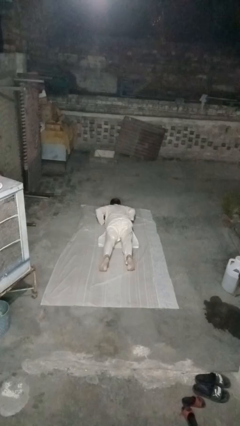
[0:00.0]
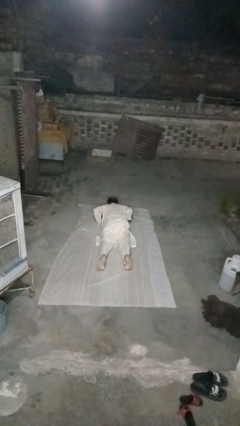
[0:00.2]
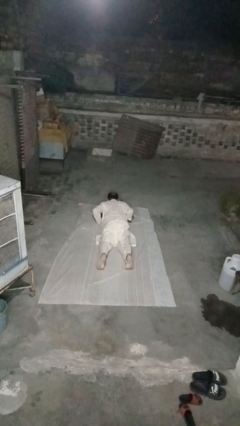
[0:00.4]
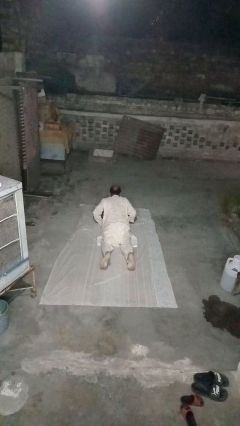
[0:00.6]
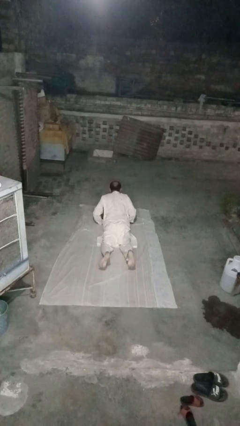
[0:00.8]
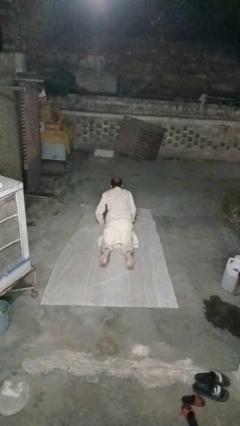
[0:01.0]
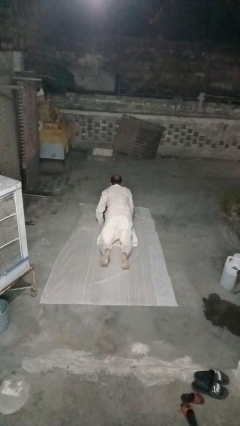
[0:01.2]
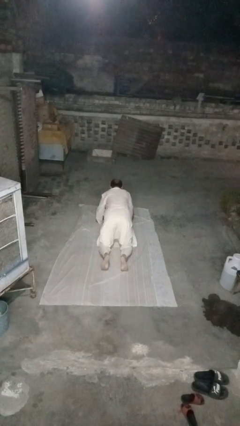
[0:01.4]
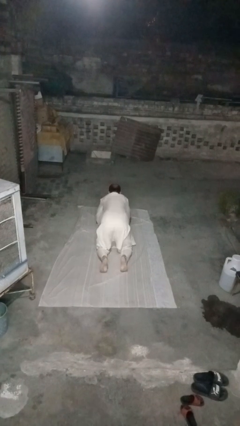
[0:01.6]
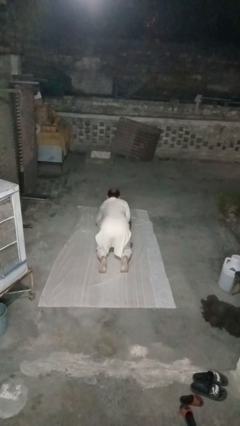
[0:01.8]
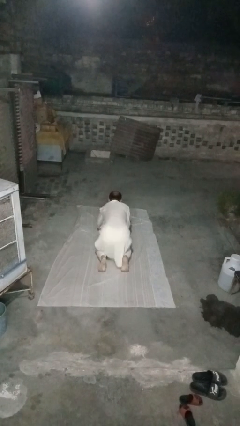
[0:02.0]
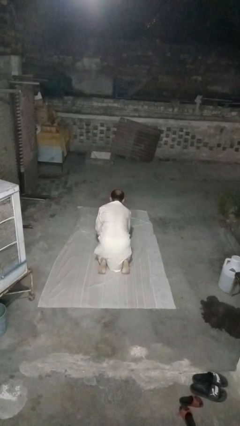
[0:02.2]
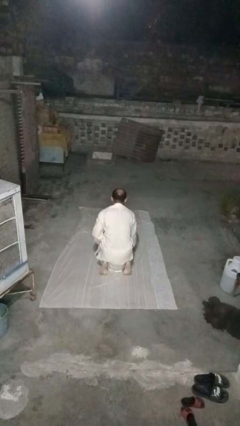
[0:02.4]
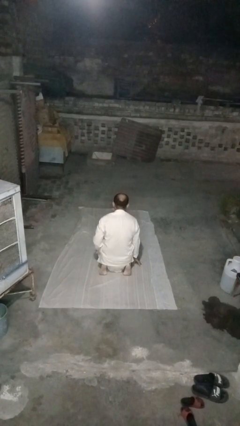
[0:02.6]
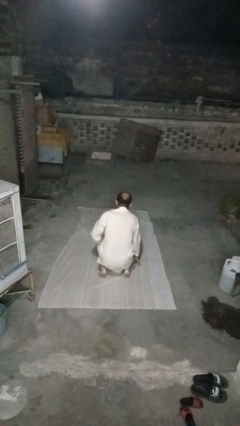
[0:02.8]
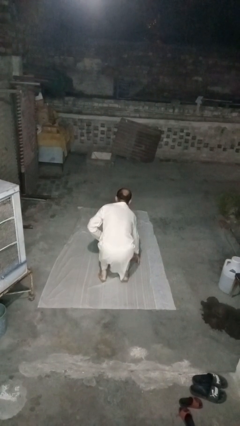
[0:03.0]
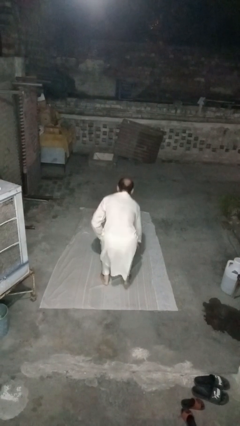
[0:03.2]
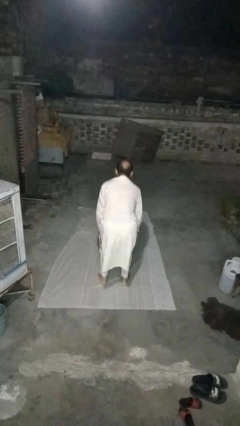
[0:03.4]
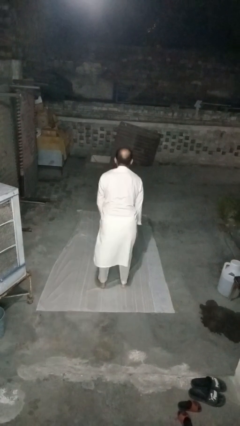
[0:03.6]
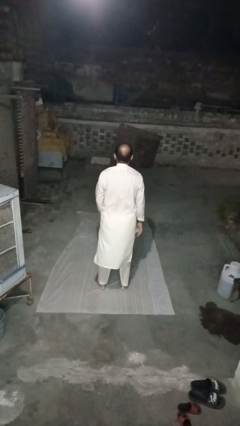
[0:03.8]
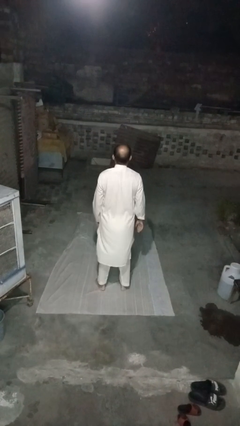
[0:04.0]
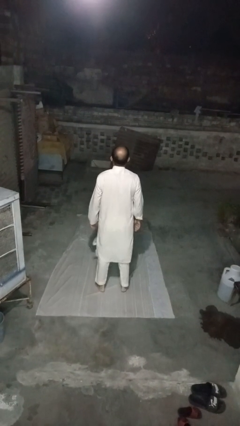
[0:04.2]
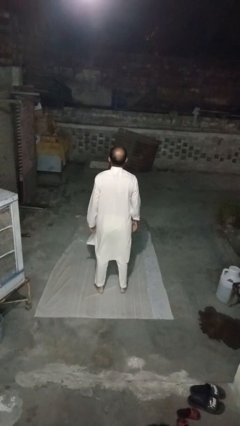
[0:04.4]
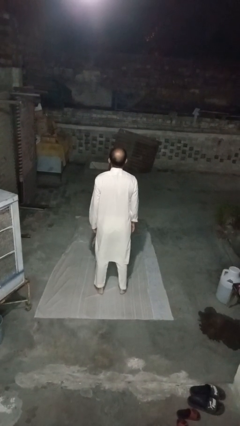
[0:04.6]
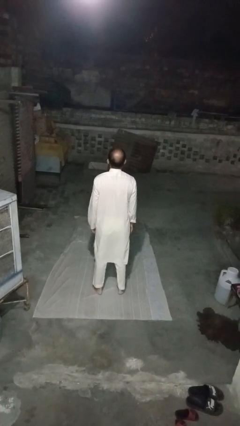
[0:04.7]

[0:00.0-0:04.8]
person stands up from floor

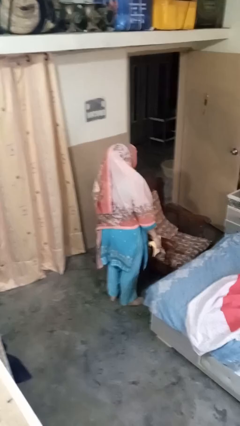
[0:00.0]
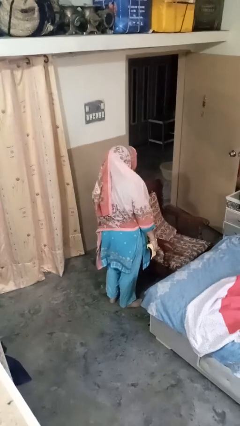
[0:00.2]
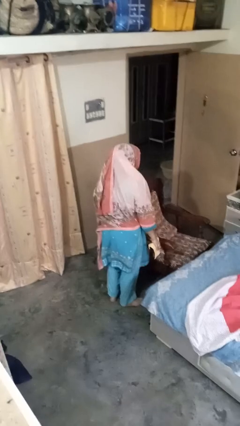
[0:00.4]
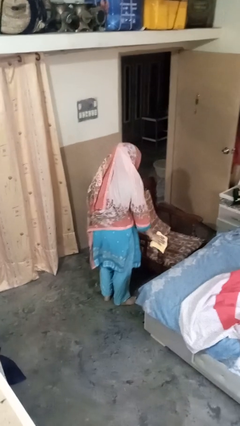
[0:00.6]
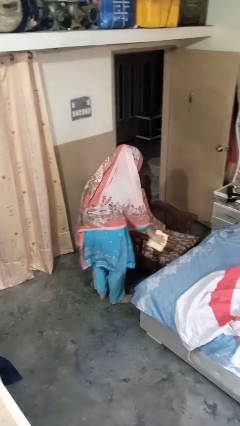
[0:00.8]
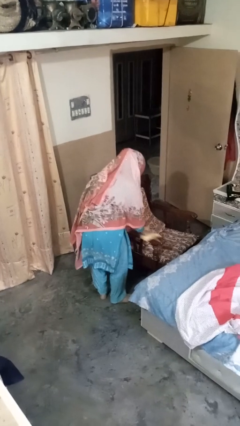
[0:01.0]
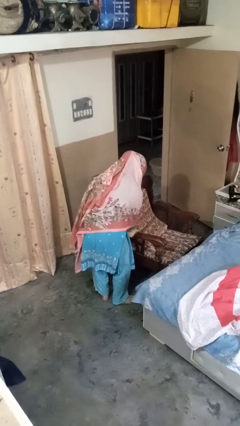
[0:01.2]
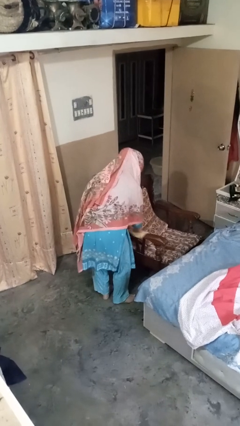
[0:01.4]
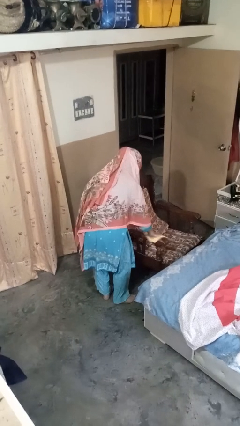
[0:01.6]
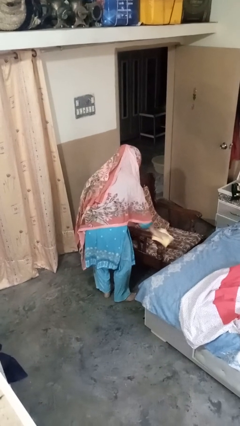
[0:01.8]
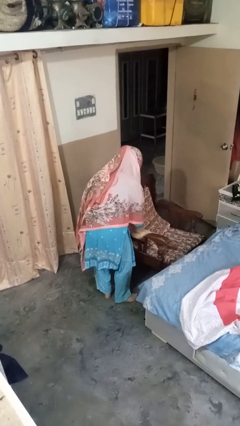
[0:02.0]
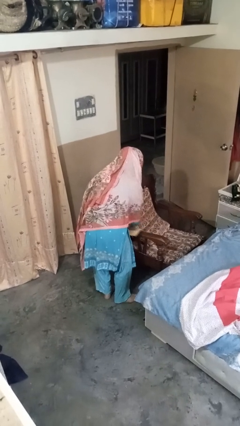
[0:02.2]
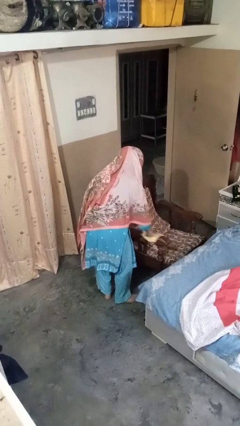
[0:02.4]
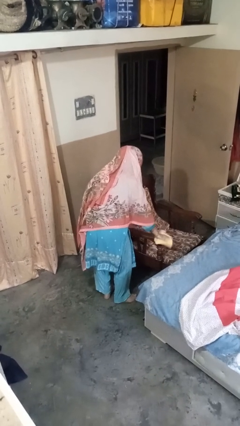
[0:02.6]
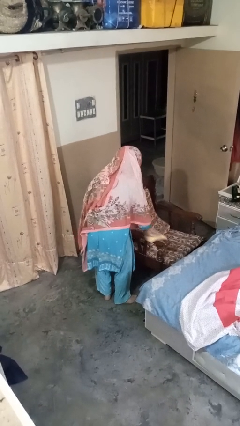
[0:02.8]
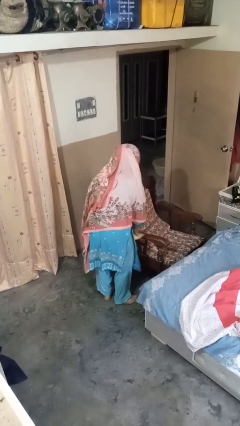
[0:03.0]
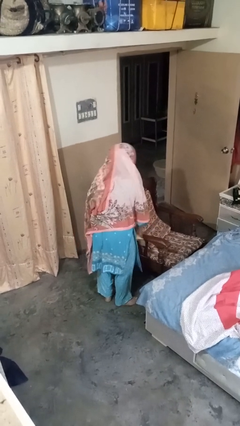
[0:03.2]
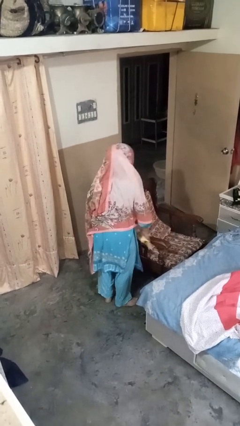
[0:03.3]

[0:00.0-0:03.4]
person dusts furniture

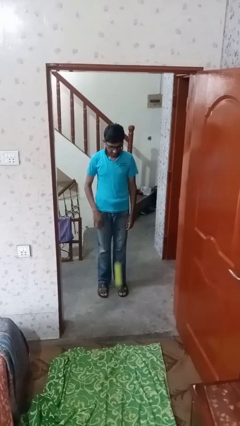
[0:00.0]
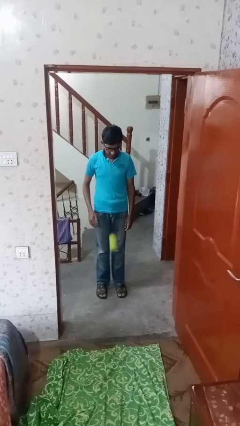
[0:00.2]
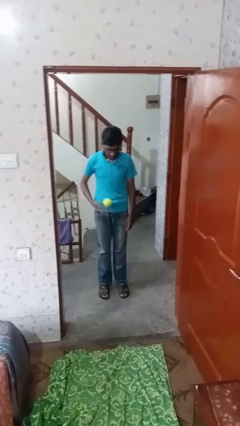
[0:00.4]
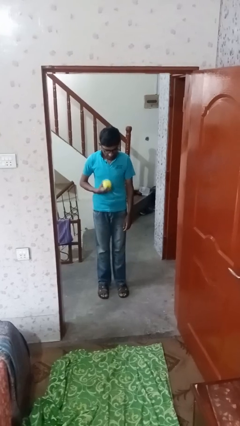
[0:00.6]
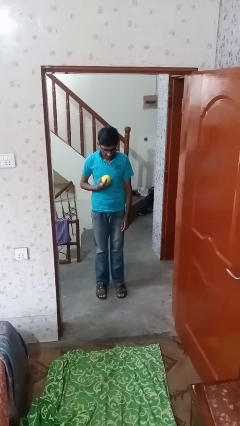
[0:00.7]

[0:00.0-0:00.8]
person bounces ball on floor

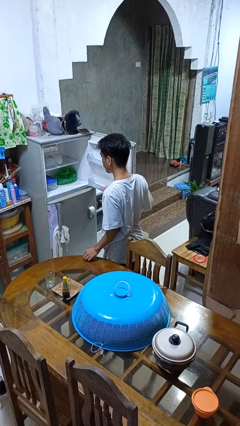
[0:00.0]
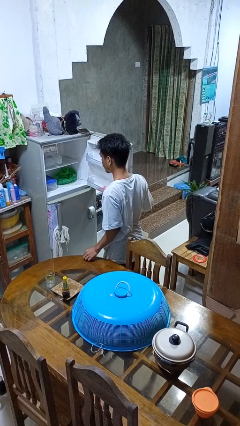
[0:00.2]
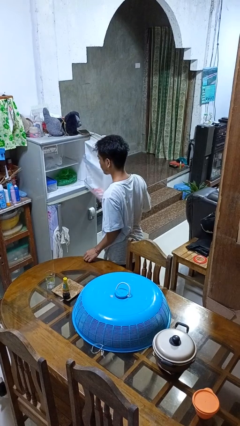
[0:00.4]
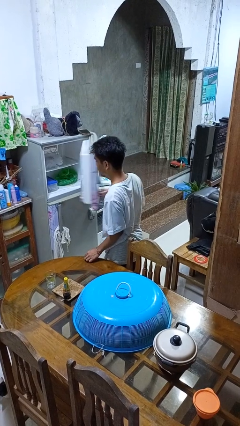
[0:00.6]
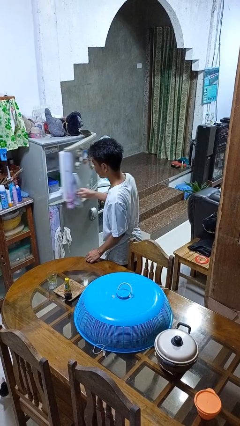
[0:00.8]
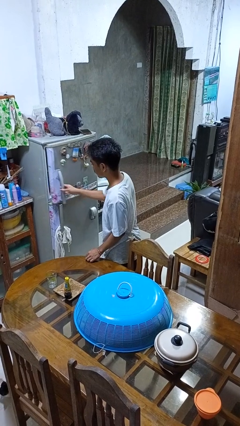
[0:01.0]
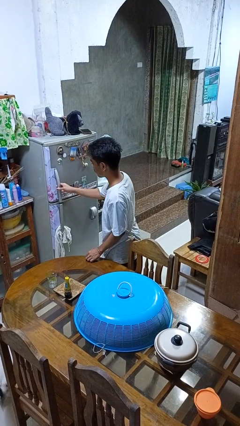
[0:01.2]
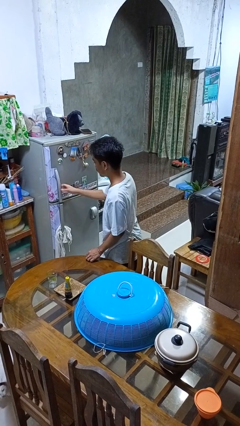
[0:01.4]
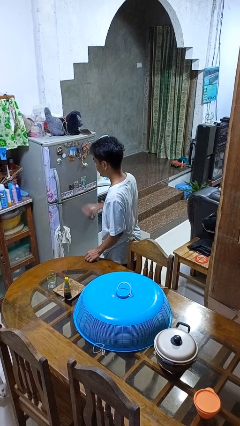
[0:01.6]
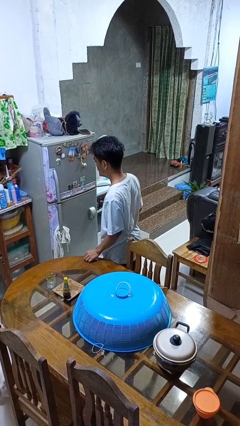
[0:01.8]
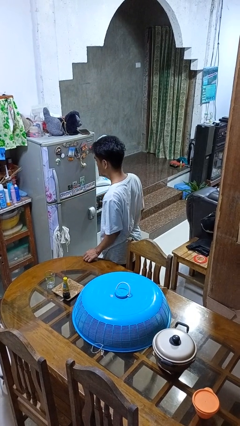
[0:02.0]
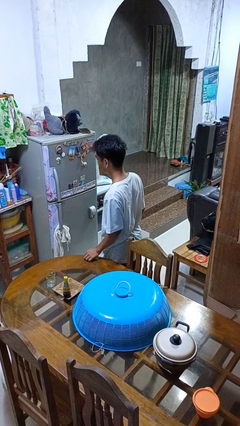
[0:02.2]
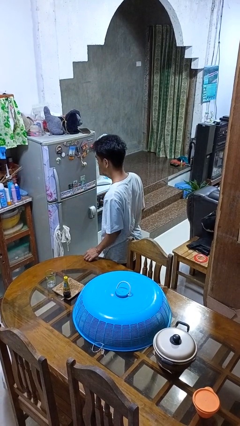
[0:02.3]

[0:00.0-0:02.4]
person closes refrigerator

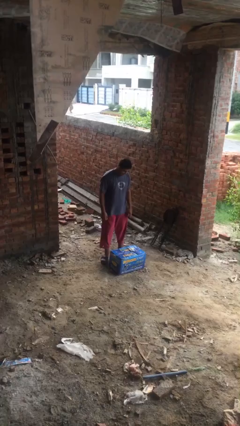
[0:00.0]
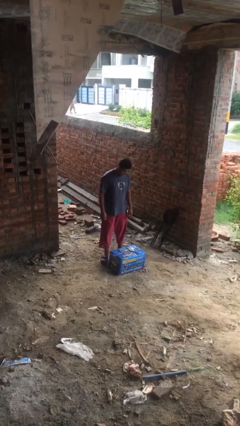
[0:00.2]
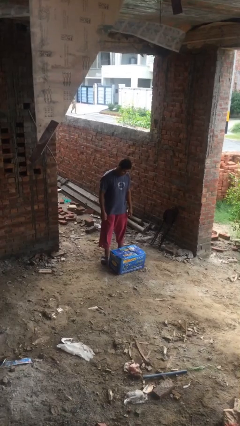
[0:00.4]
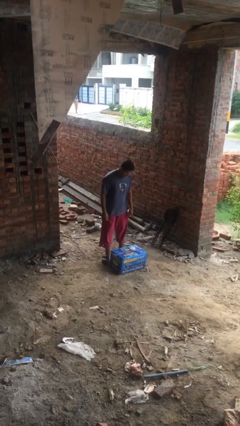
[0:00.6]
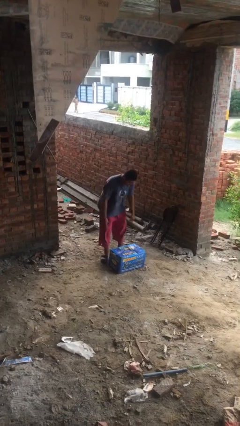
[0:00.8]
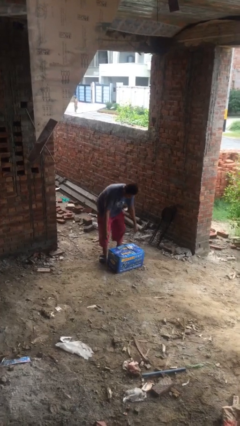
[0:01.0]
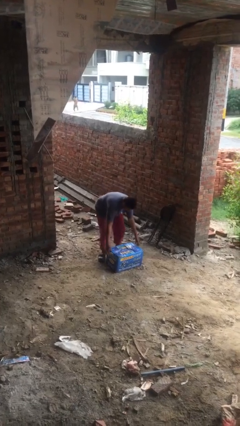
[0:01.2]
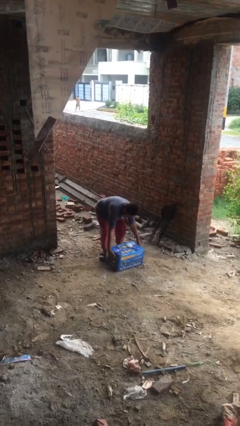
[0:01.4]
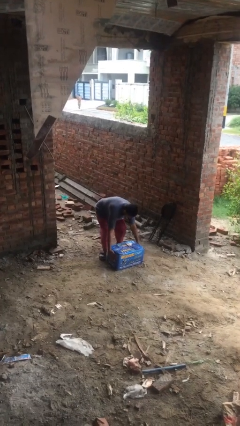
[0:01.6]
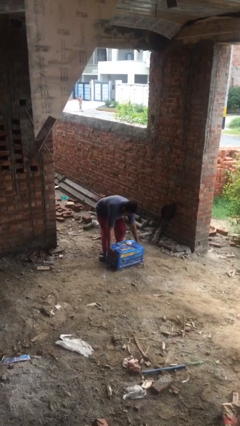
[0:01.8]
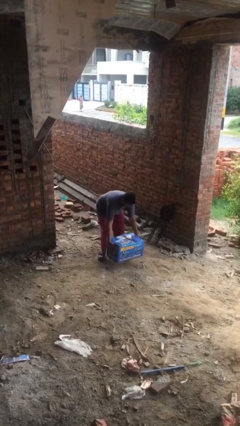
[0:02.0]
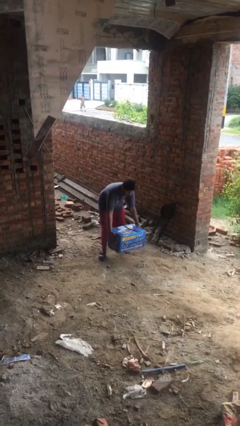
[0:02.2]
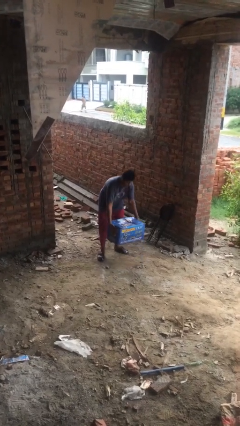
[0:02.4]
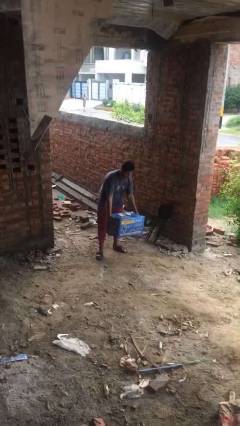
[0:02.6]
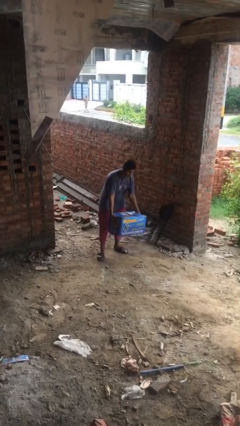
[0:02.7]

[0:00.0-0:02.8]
person picks up object from floor

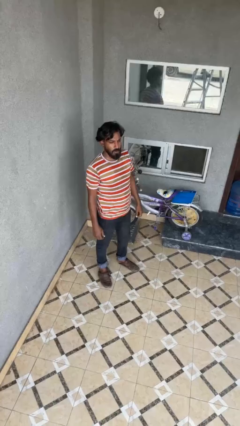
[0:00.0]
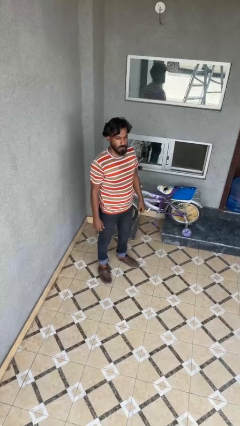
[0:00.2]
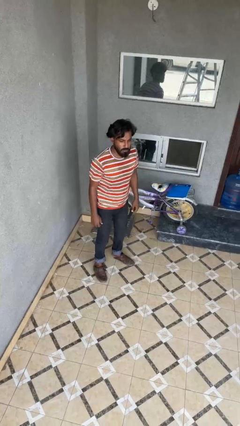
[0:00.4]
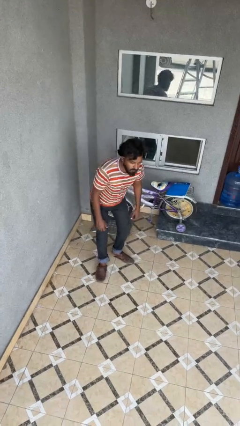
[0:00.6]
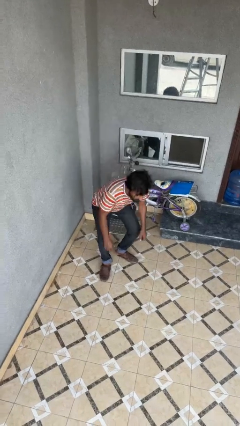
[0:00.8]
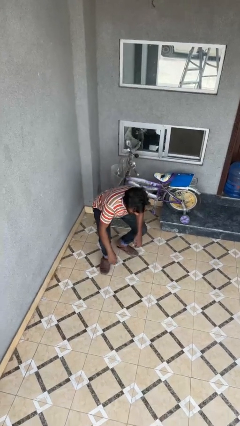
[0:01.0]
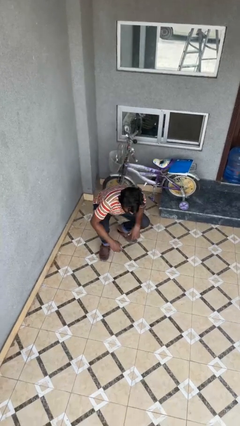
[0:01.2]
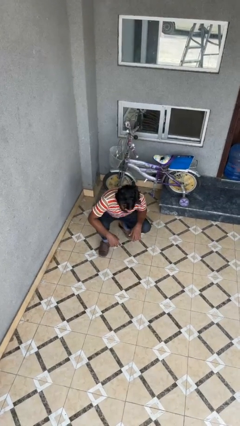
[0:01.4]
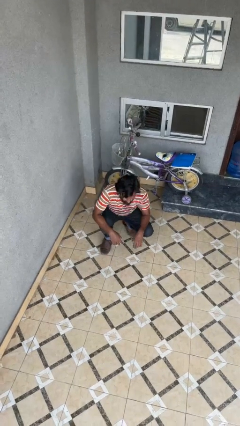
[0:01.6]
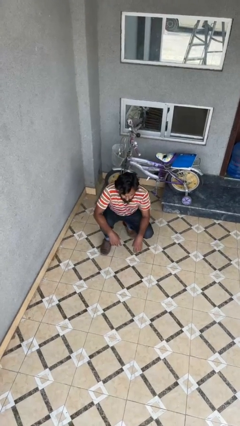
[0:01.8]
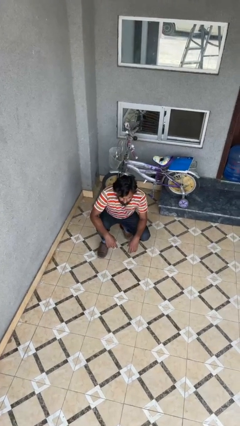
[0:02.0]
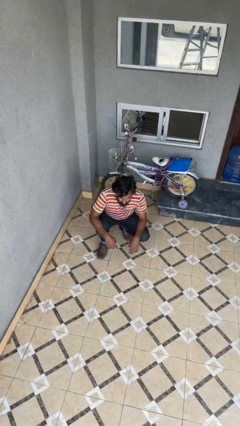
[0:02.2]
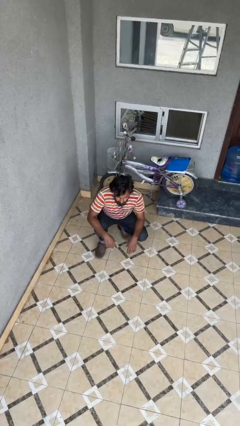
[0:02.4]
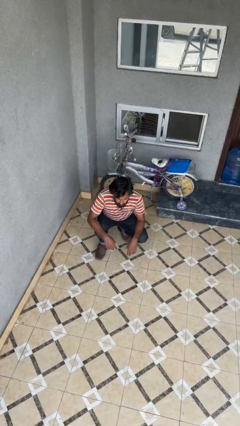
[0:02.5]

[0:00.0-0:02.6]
person squats

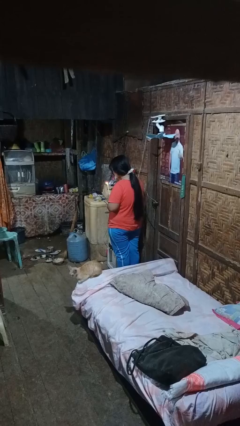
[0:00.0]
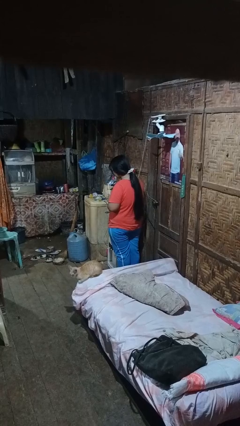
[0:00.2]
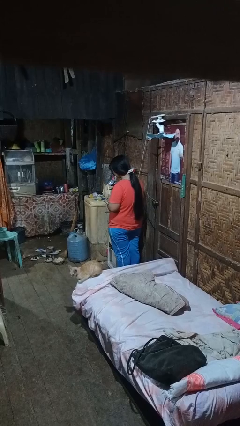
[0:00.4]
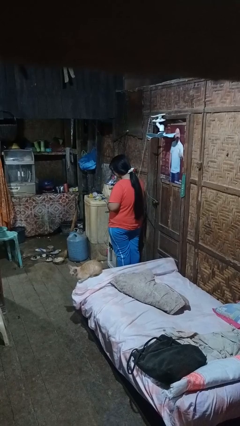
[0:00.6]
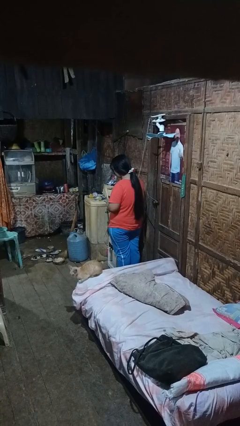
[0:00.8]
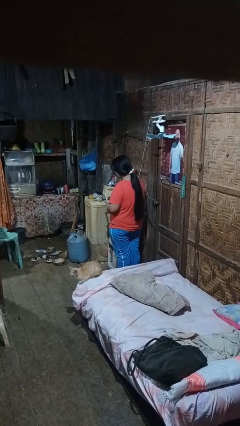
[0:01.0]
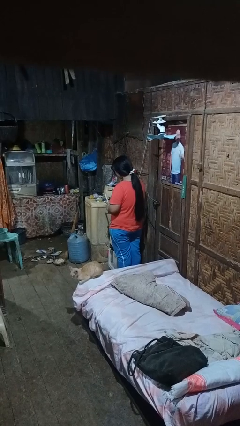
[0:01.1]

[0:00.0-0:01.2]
person extinguishes candle
